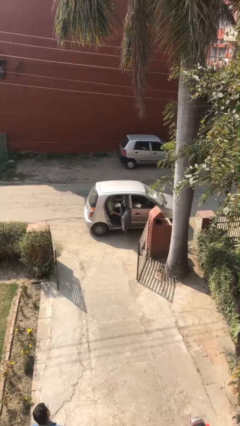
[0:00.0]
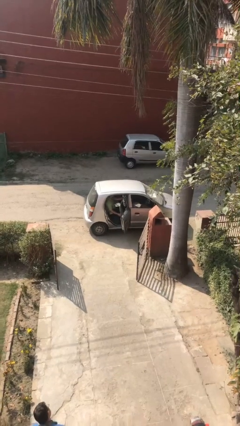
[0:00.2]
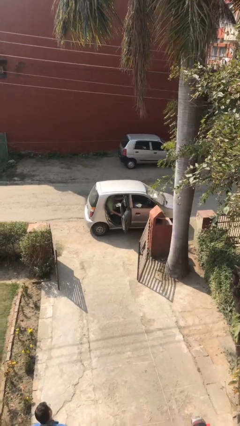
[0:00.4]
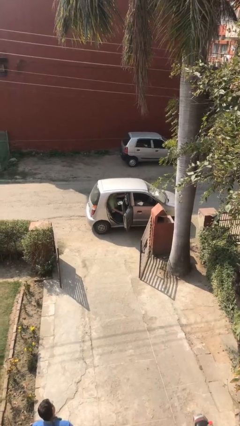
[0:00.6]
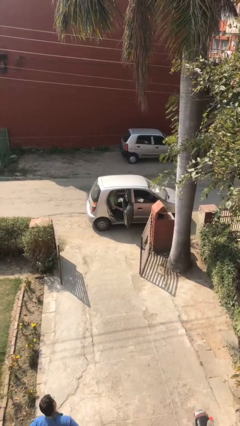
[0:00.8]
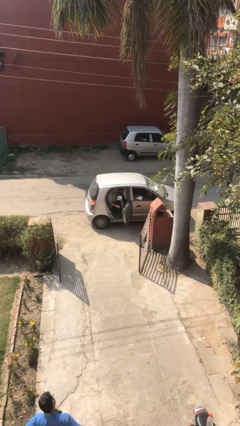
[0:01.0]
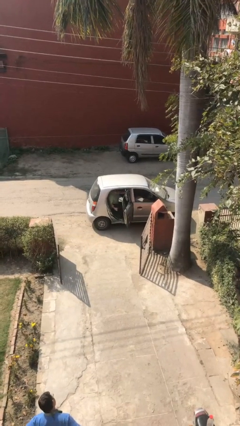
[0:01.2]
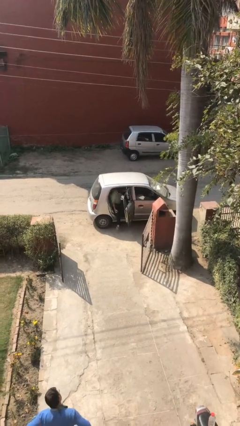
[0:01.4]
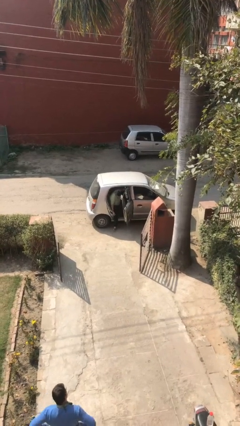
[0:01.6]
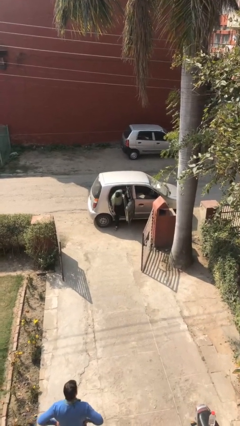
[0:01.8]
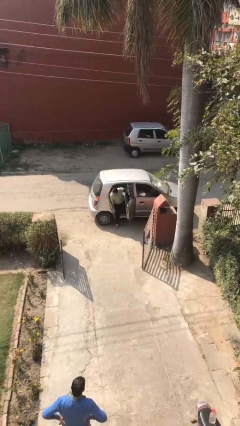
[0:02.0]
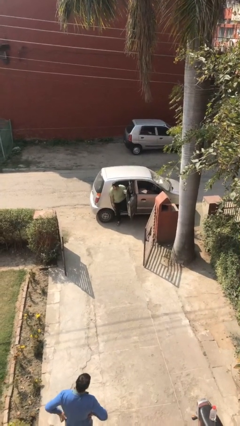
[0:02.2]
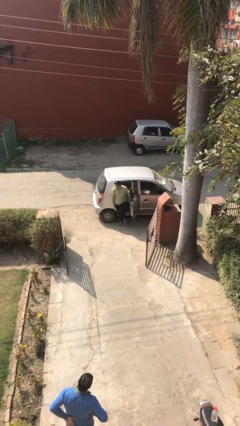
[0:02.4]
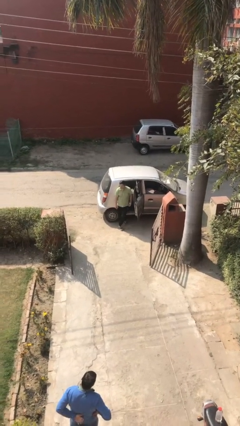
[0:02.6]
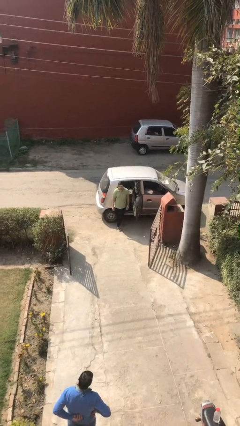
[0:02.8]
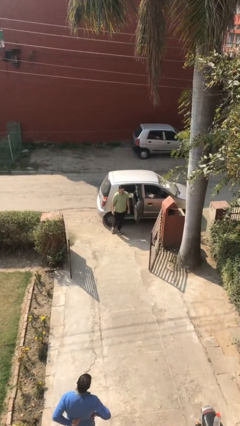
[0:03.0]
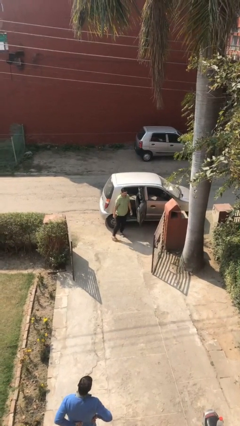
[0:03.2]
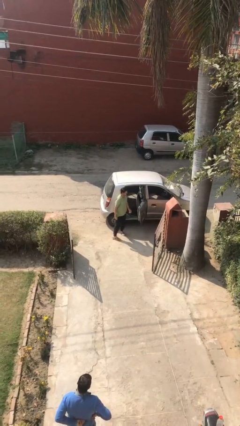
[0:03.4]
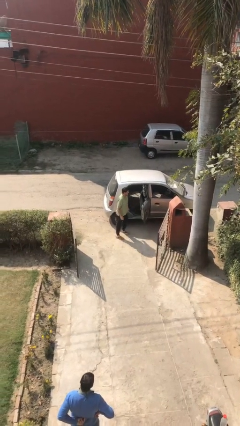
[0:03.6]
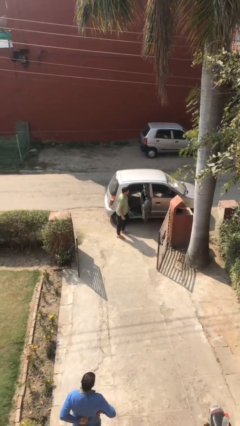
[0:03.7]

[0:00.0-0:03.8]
person exits car

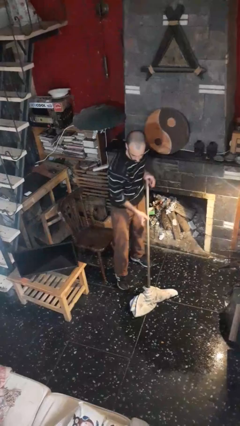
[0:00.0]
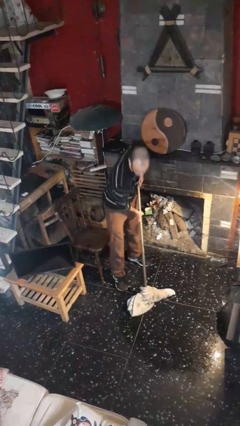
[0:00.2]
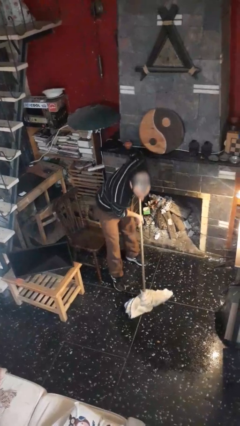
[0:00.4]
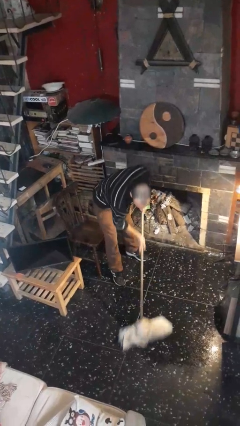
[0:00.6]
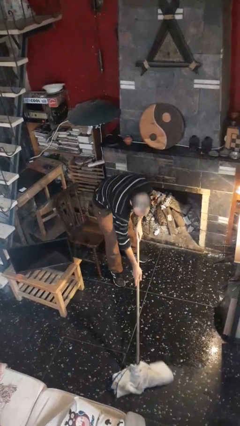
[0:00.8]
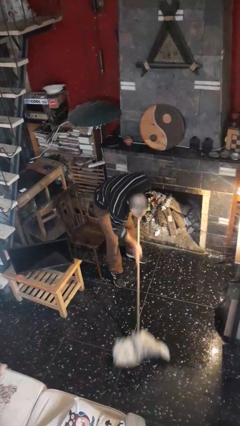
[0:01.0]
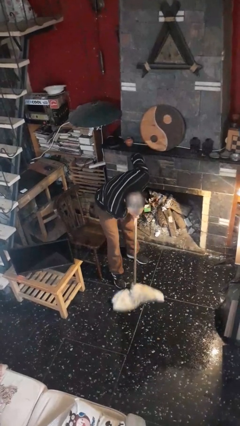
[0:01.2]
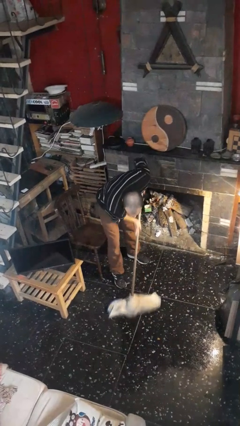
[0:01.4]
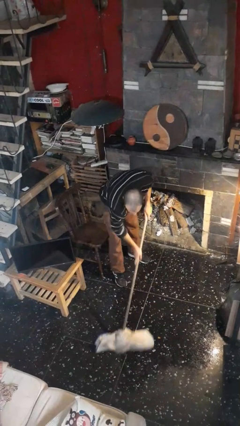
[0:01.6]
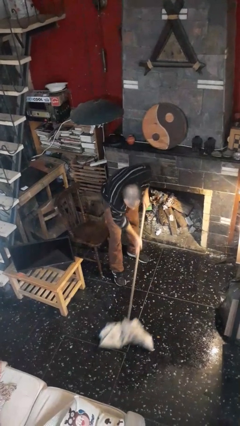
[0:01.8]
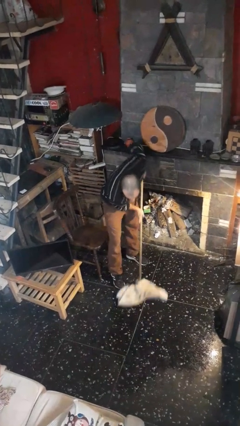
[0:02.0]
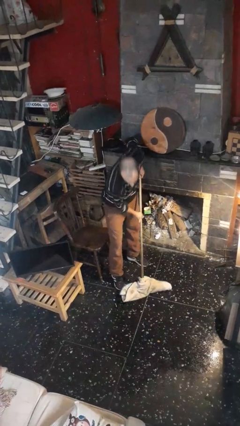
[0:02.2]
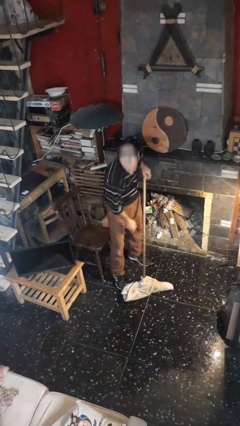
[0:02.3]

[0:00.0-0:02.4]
person mops

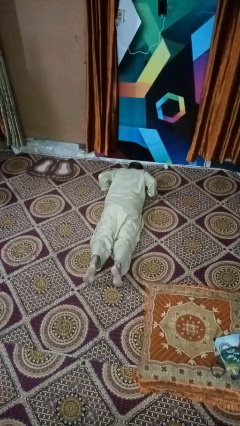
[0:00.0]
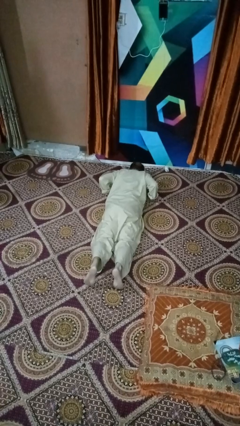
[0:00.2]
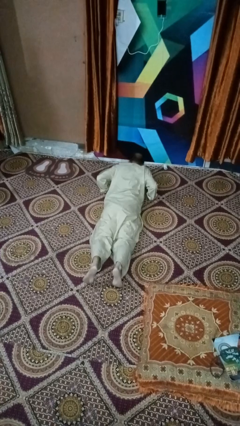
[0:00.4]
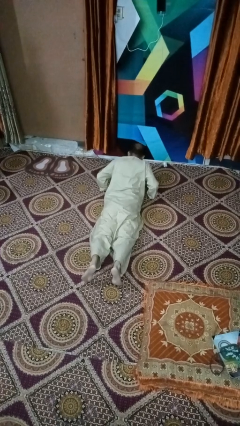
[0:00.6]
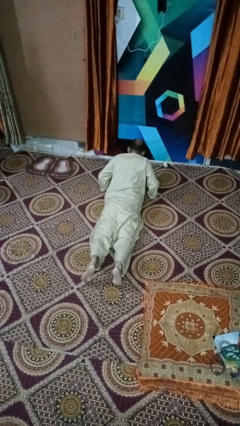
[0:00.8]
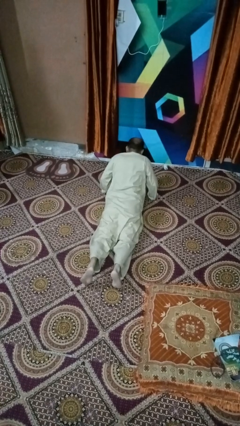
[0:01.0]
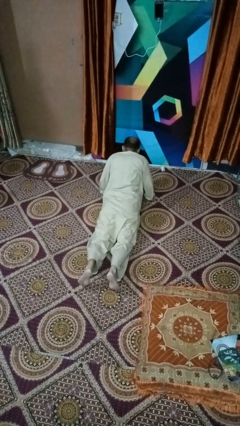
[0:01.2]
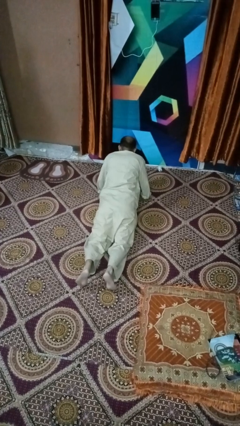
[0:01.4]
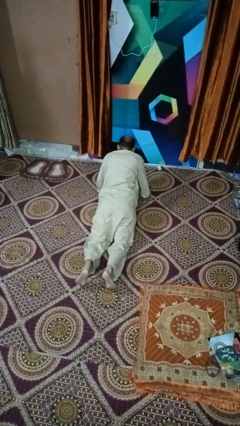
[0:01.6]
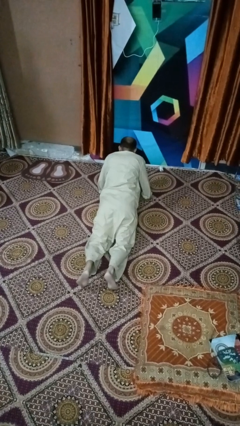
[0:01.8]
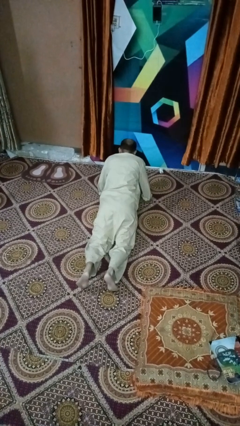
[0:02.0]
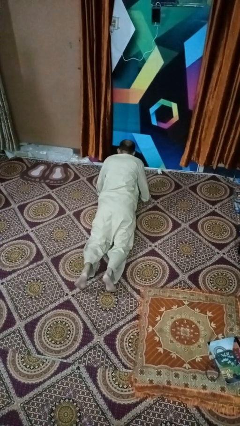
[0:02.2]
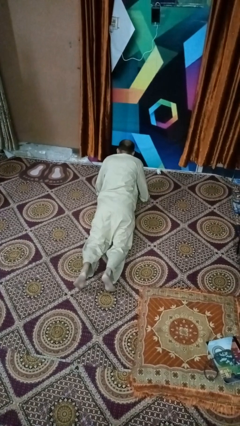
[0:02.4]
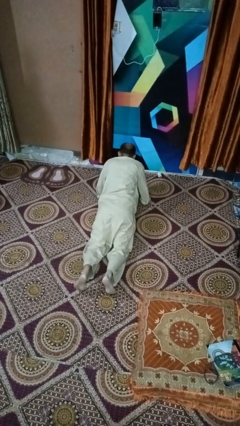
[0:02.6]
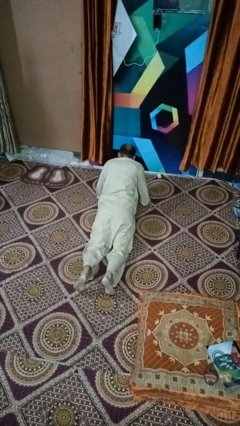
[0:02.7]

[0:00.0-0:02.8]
person exercises with situp

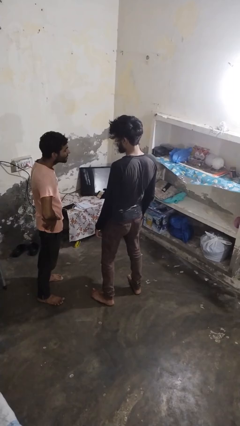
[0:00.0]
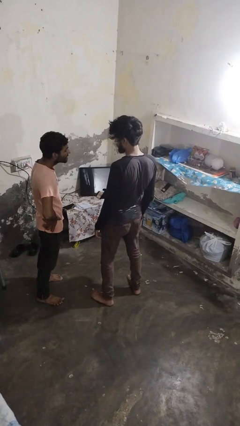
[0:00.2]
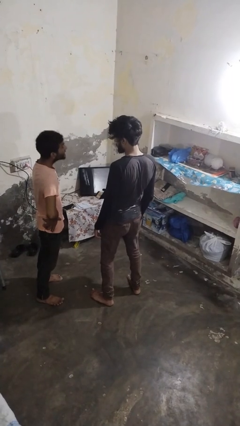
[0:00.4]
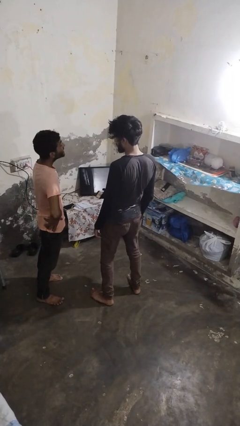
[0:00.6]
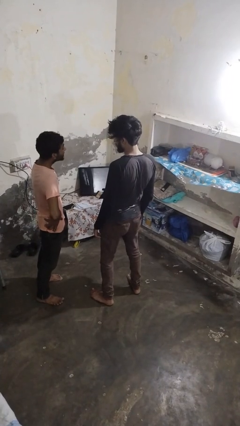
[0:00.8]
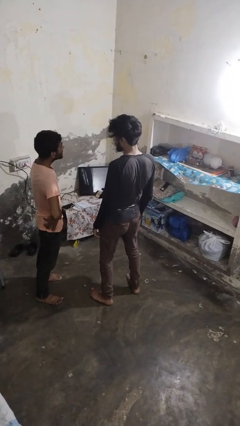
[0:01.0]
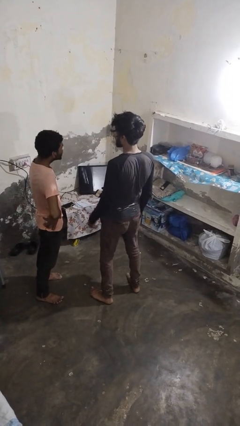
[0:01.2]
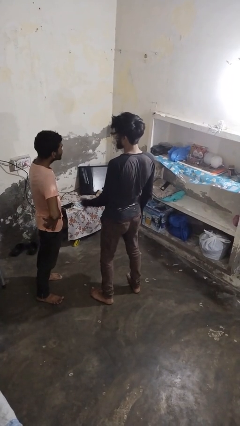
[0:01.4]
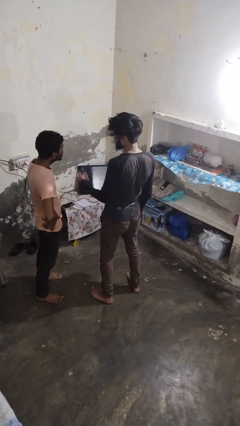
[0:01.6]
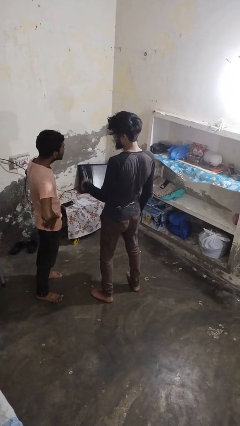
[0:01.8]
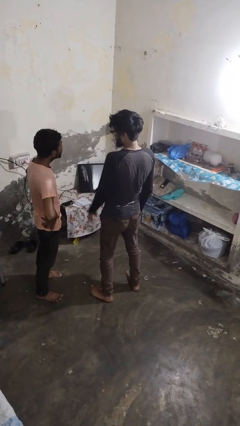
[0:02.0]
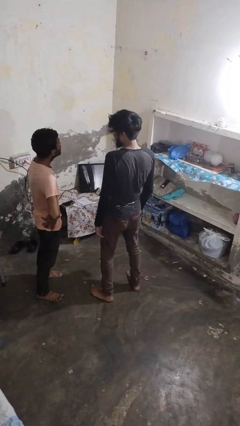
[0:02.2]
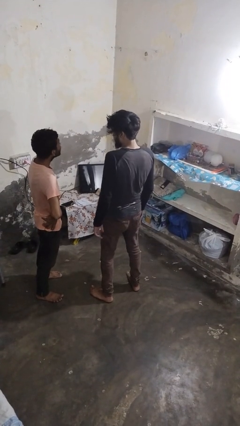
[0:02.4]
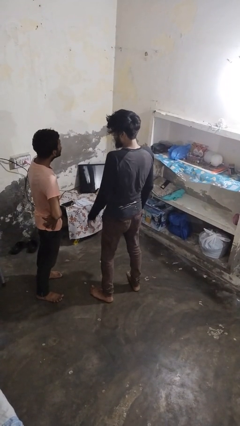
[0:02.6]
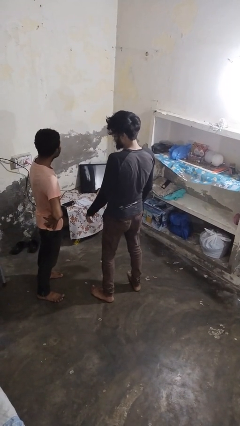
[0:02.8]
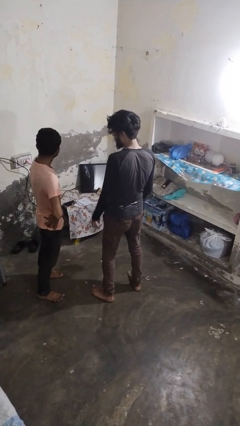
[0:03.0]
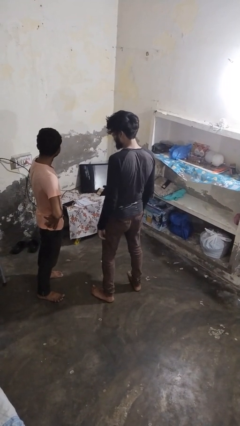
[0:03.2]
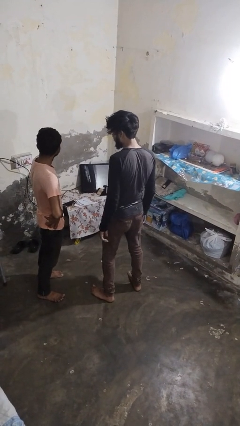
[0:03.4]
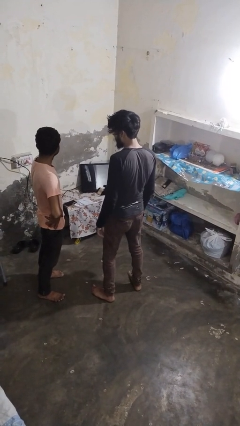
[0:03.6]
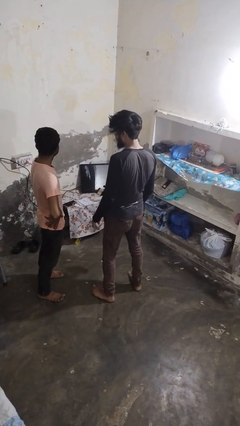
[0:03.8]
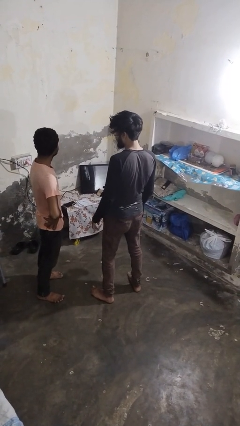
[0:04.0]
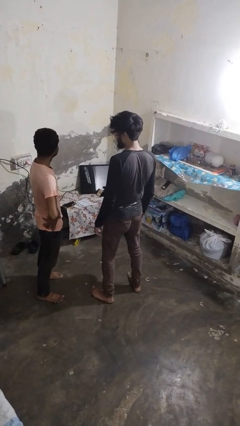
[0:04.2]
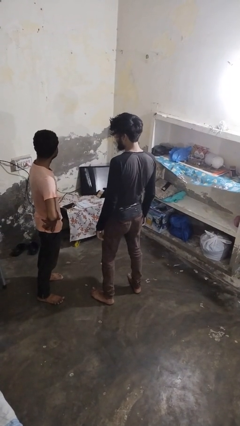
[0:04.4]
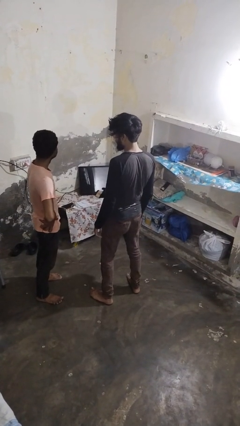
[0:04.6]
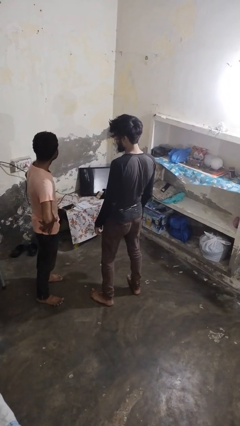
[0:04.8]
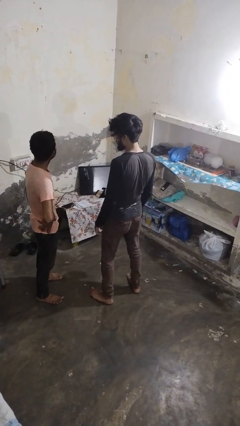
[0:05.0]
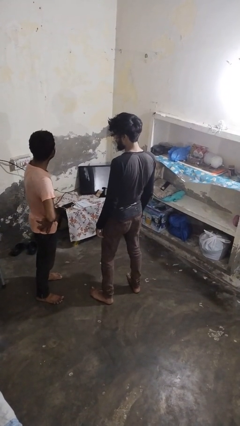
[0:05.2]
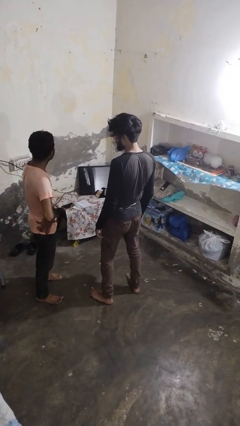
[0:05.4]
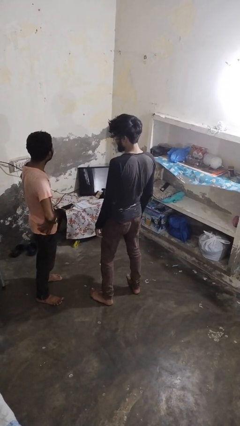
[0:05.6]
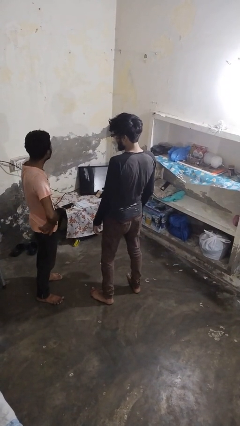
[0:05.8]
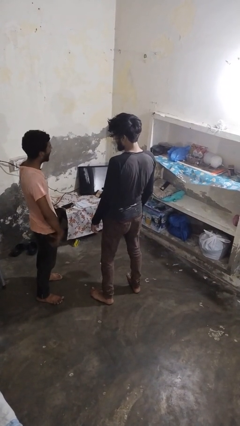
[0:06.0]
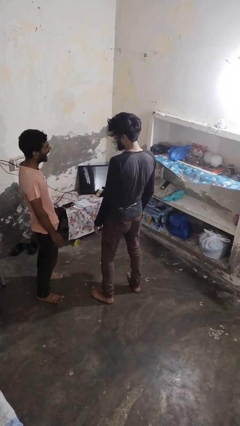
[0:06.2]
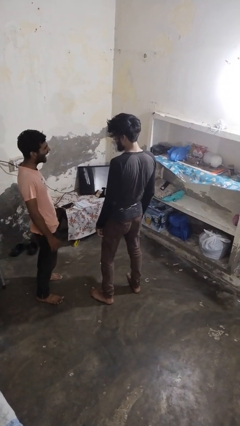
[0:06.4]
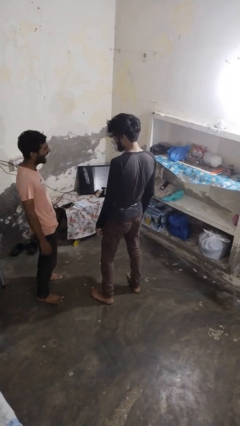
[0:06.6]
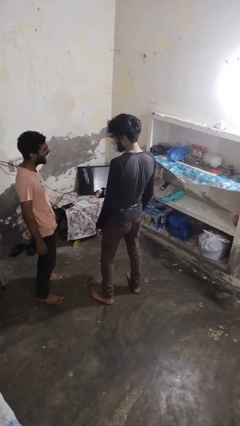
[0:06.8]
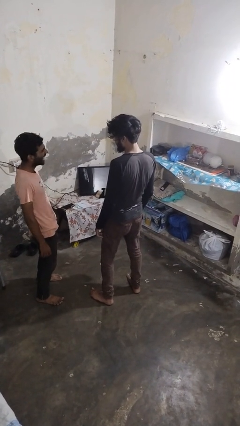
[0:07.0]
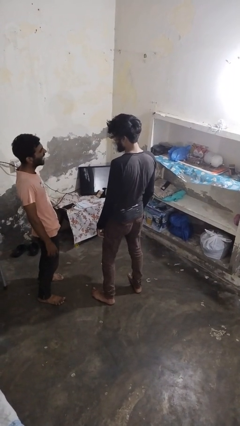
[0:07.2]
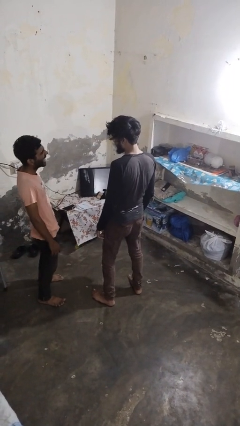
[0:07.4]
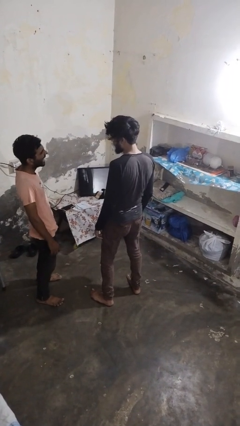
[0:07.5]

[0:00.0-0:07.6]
person laughs with person

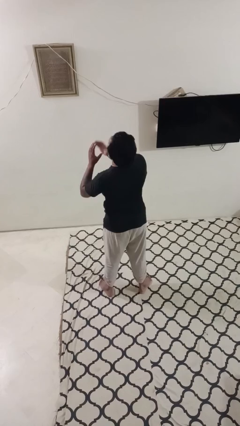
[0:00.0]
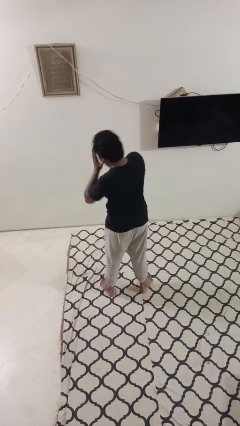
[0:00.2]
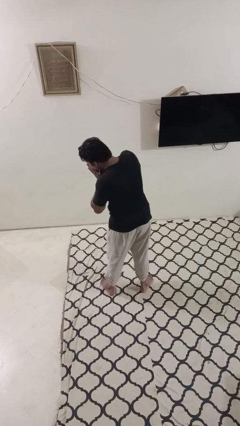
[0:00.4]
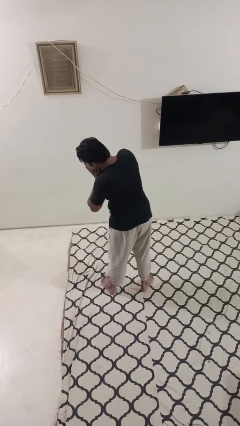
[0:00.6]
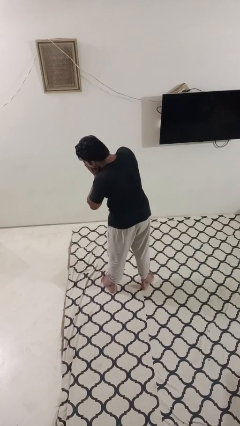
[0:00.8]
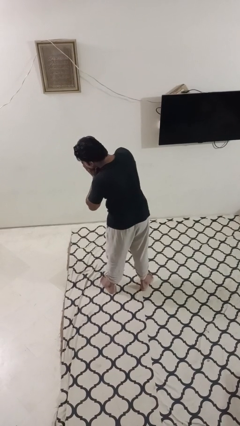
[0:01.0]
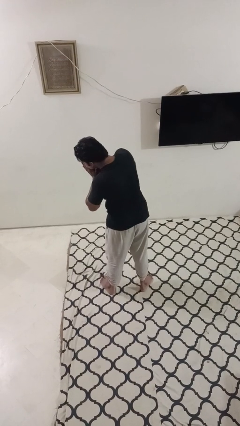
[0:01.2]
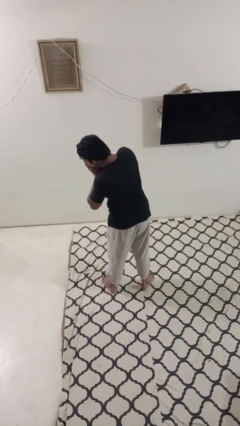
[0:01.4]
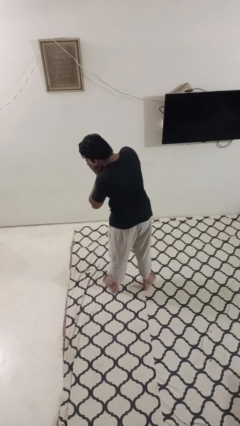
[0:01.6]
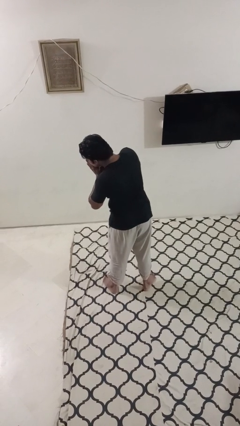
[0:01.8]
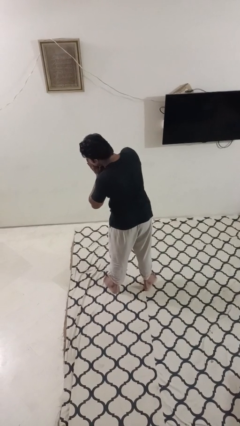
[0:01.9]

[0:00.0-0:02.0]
person sneezes into hand
